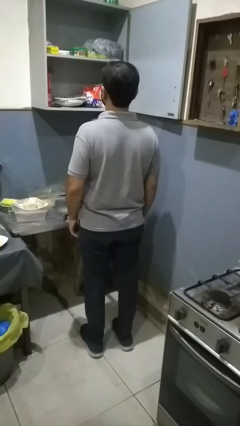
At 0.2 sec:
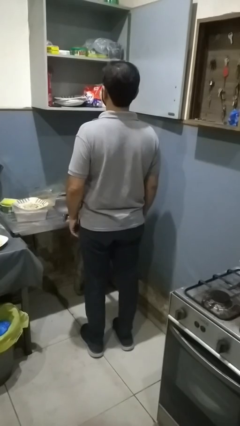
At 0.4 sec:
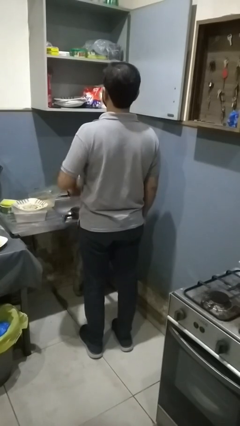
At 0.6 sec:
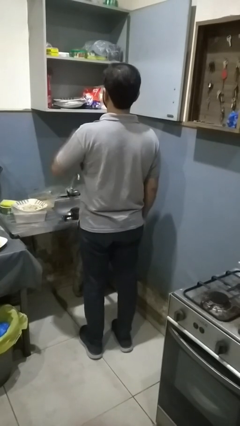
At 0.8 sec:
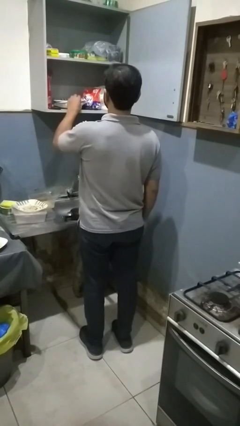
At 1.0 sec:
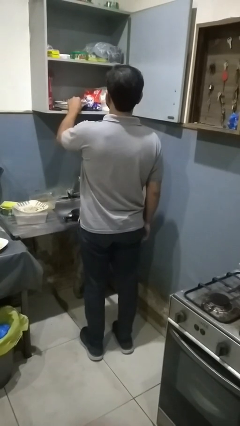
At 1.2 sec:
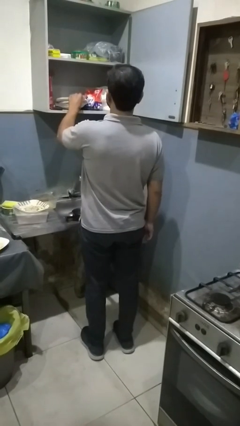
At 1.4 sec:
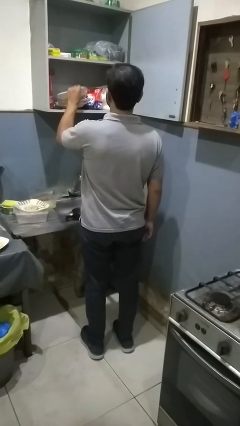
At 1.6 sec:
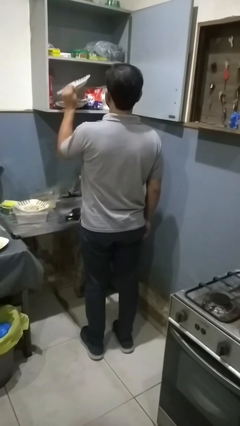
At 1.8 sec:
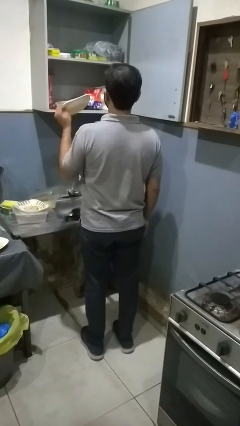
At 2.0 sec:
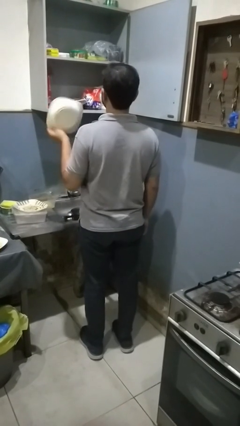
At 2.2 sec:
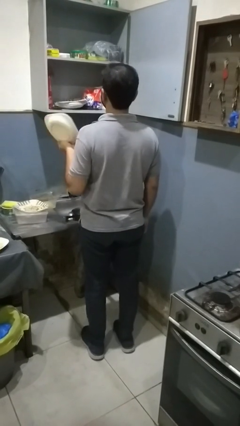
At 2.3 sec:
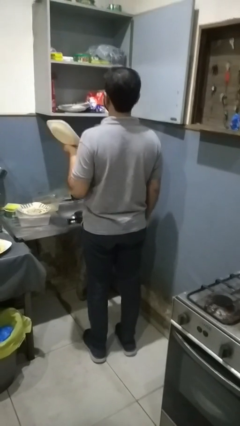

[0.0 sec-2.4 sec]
person takes object from cabinet

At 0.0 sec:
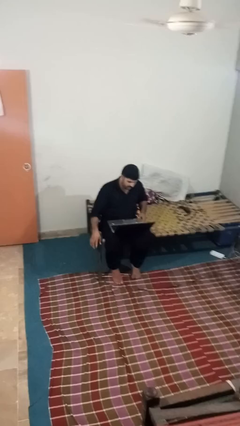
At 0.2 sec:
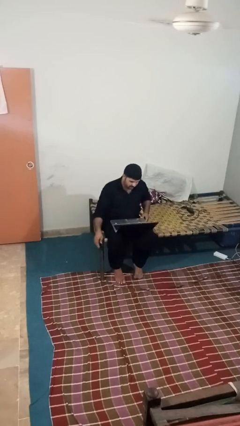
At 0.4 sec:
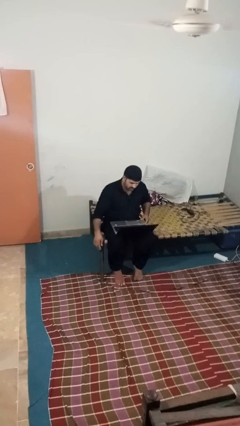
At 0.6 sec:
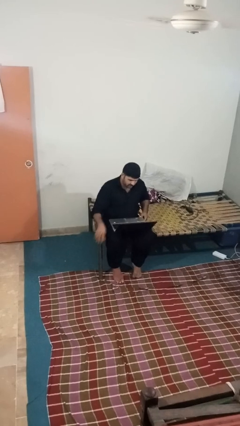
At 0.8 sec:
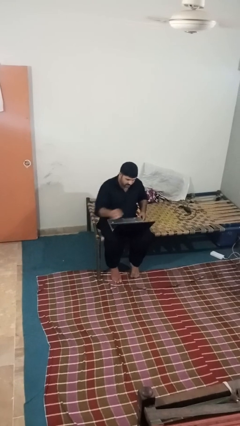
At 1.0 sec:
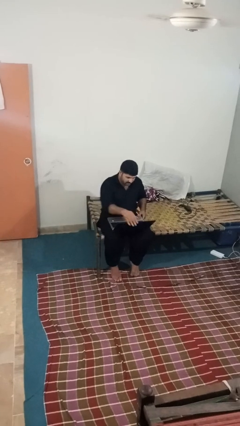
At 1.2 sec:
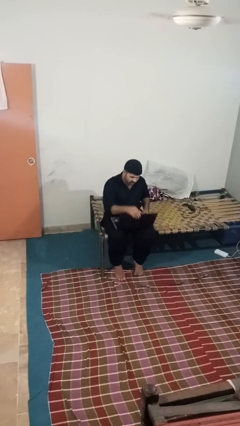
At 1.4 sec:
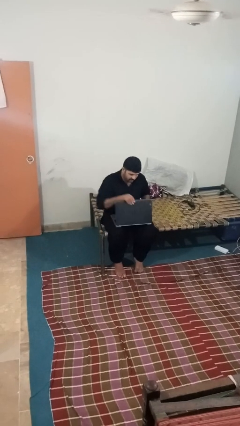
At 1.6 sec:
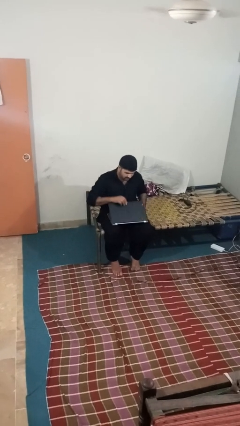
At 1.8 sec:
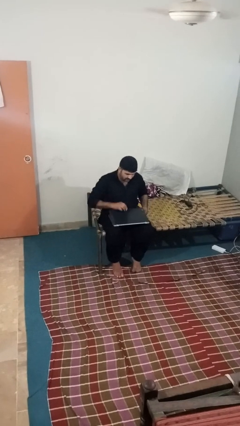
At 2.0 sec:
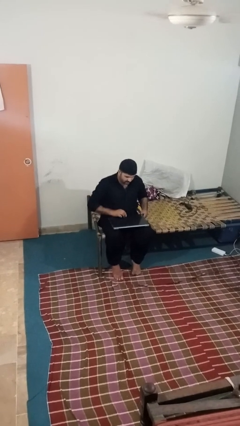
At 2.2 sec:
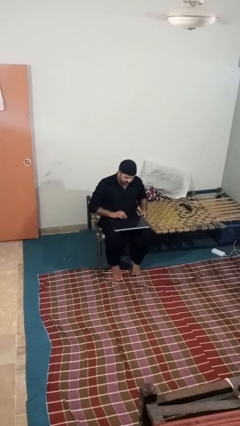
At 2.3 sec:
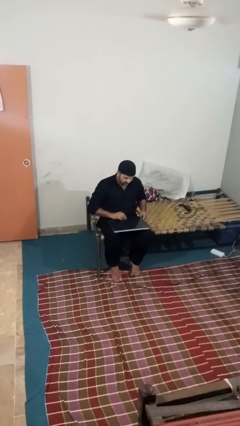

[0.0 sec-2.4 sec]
person closes laptop

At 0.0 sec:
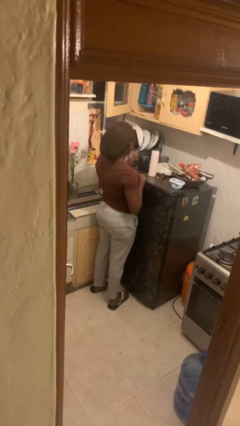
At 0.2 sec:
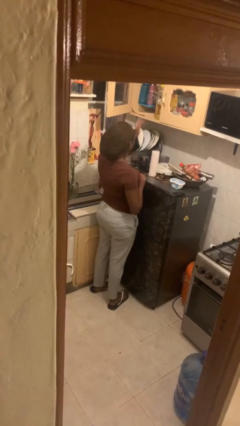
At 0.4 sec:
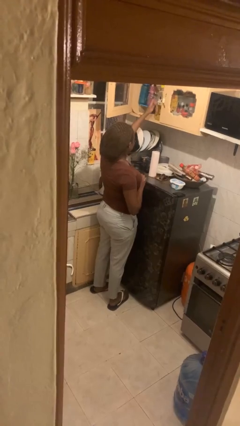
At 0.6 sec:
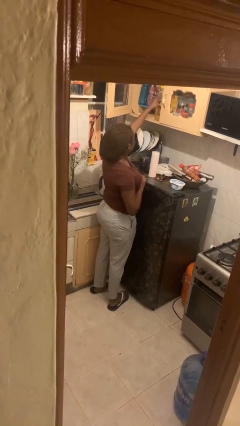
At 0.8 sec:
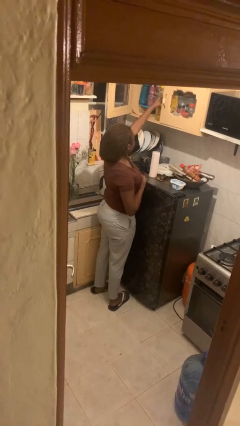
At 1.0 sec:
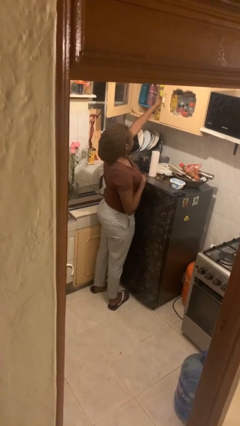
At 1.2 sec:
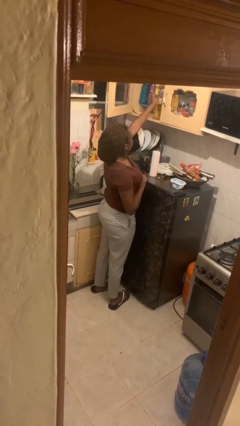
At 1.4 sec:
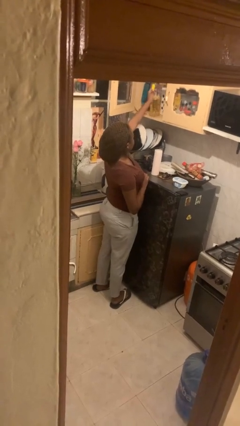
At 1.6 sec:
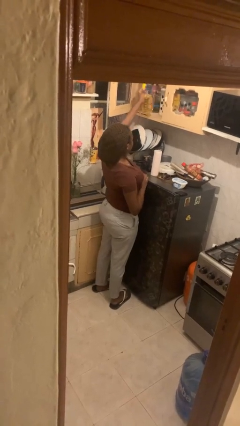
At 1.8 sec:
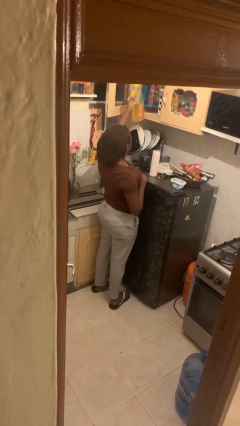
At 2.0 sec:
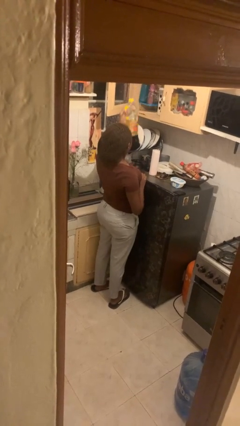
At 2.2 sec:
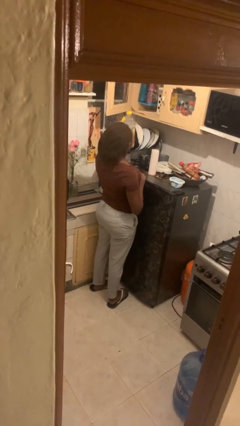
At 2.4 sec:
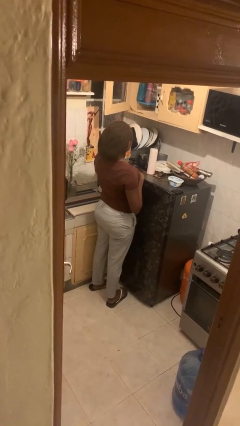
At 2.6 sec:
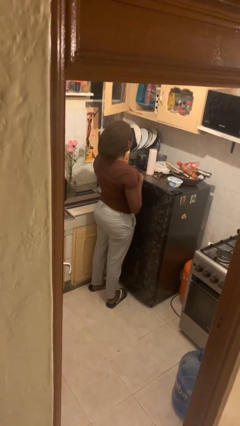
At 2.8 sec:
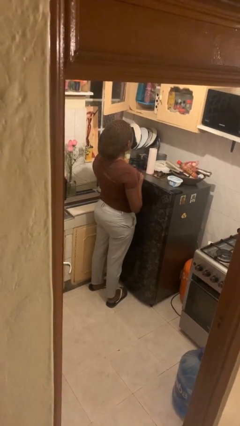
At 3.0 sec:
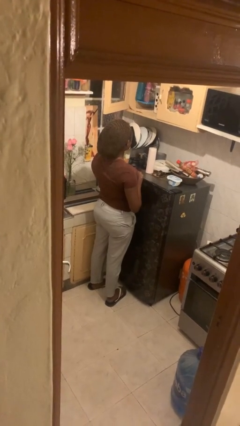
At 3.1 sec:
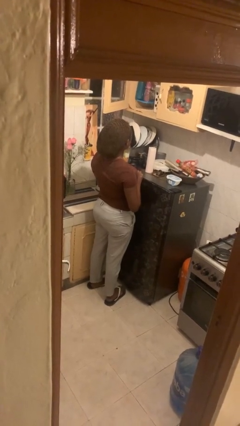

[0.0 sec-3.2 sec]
person picks up object from cabinet

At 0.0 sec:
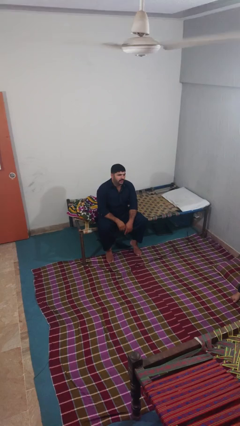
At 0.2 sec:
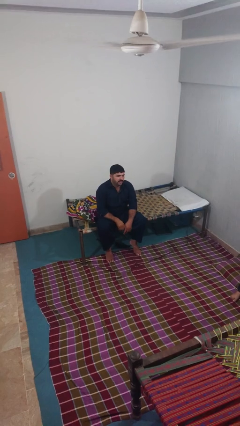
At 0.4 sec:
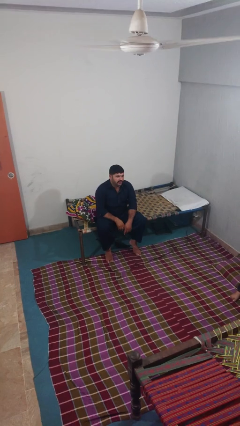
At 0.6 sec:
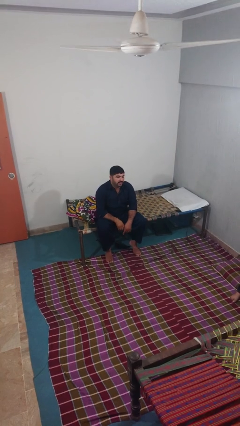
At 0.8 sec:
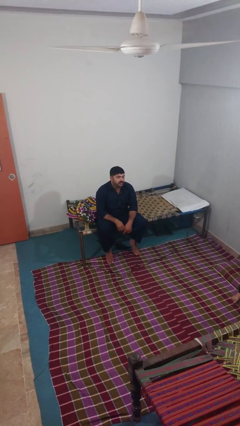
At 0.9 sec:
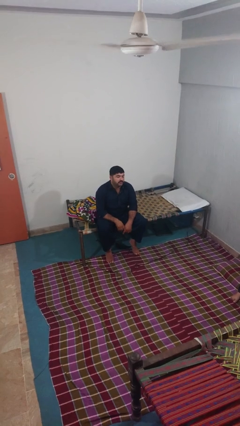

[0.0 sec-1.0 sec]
person gestures lower hand

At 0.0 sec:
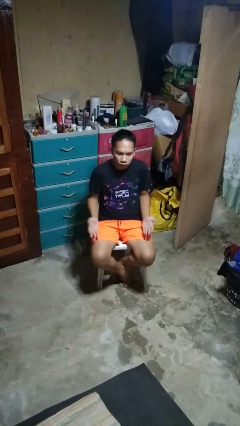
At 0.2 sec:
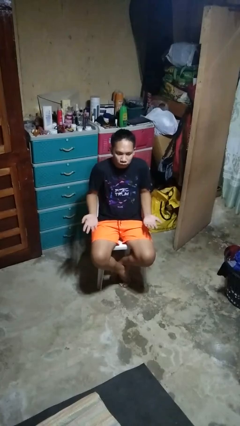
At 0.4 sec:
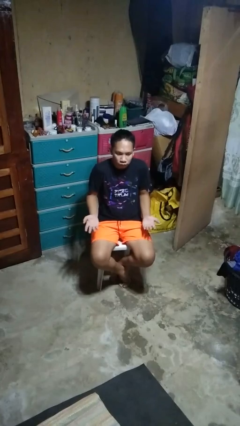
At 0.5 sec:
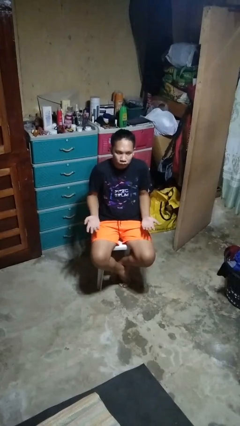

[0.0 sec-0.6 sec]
person shrugs

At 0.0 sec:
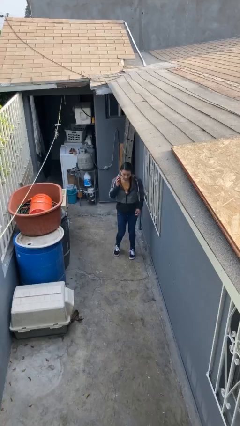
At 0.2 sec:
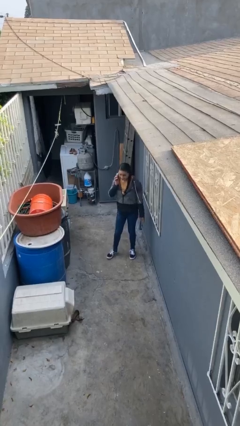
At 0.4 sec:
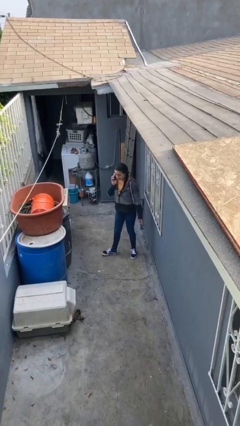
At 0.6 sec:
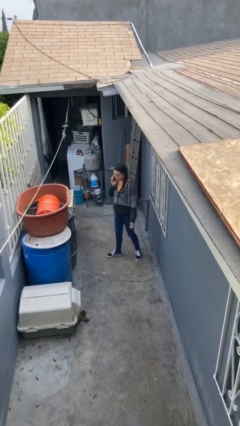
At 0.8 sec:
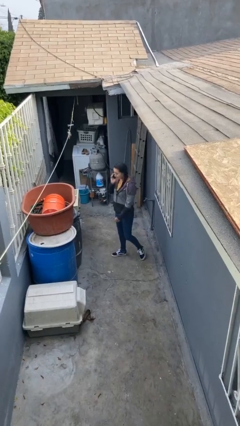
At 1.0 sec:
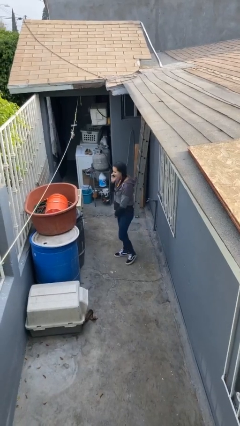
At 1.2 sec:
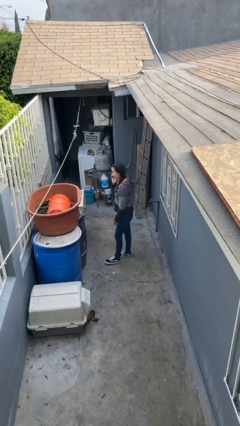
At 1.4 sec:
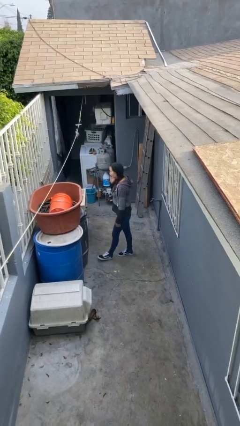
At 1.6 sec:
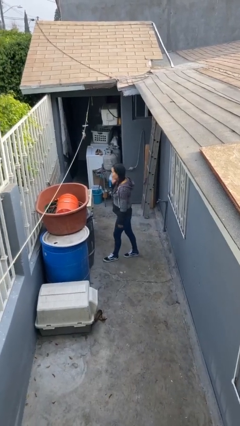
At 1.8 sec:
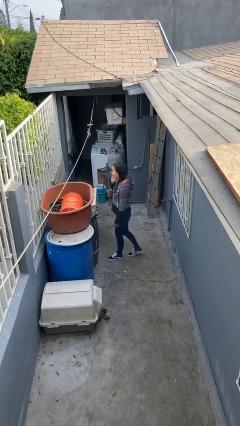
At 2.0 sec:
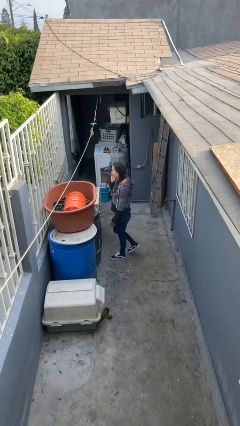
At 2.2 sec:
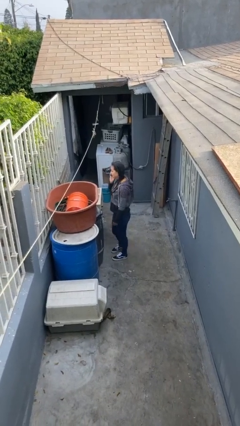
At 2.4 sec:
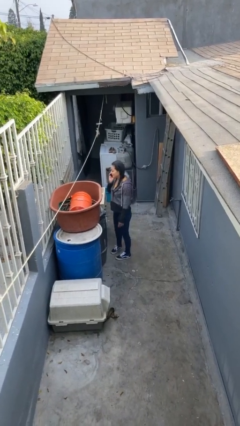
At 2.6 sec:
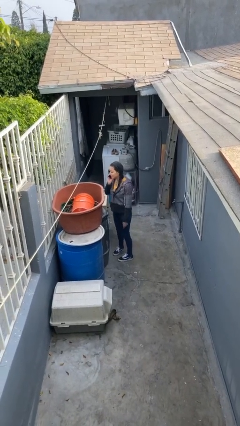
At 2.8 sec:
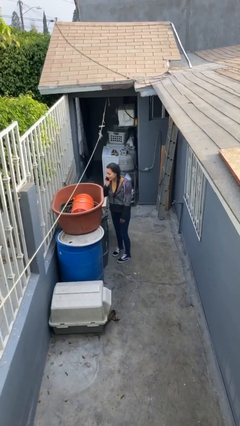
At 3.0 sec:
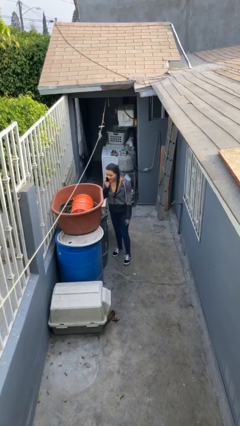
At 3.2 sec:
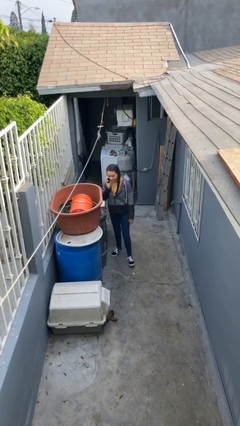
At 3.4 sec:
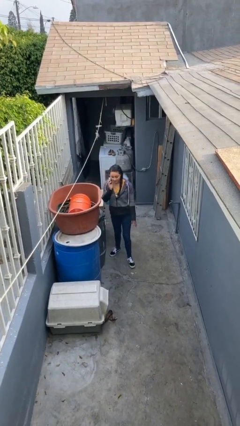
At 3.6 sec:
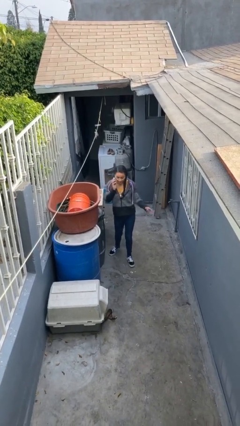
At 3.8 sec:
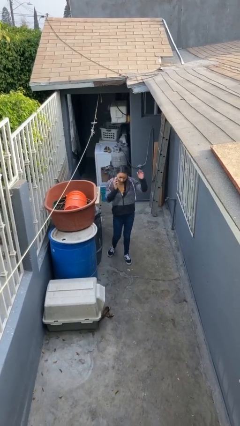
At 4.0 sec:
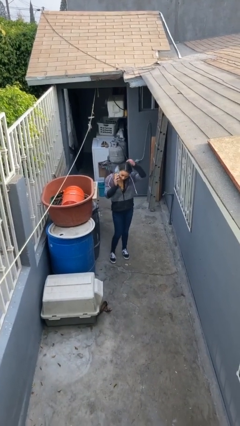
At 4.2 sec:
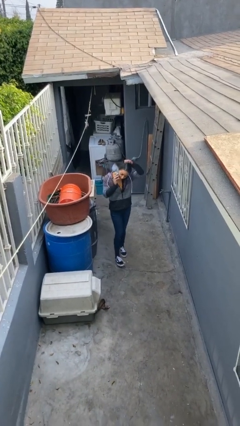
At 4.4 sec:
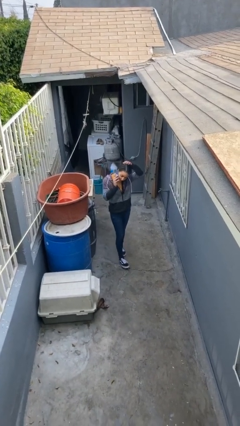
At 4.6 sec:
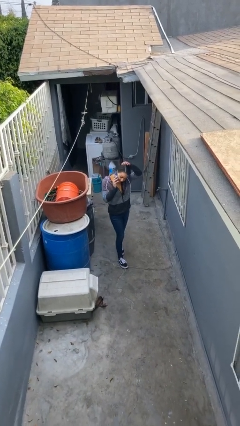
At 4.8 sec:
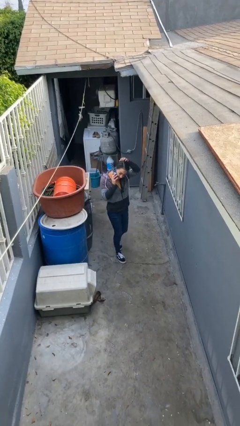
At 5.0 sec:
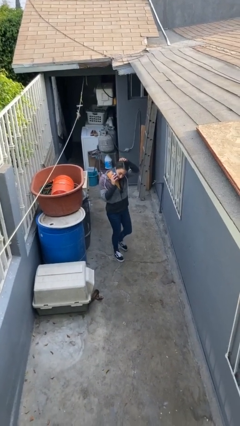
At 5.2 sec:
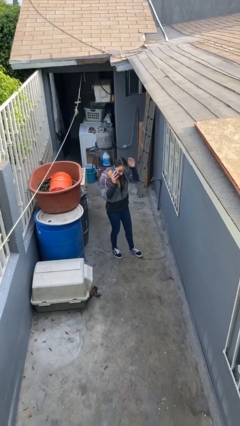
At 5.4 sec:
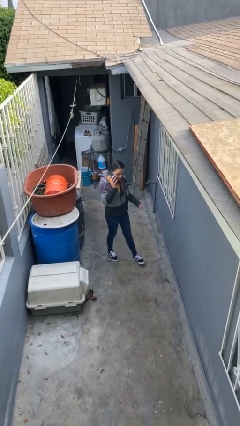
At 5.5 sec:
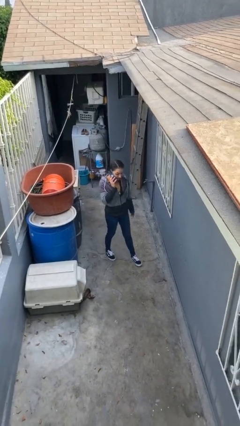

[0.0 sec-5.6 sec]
person talks on phone

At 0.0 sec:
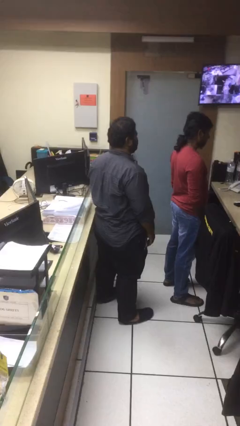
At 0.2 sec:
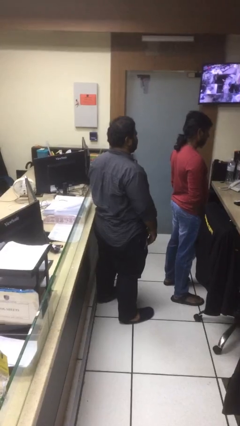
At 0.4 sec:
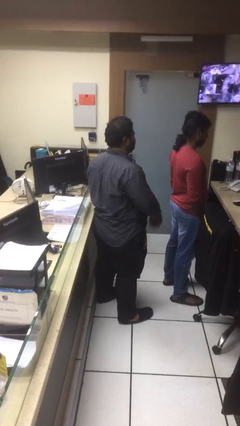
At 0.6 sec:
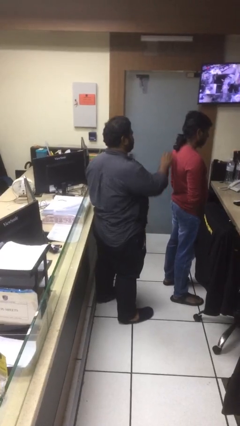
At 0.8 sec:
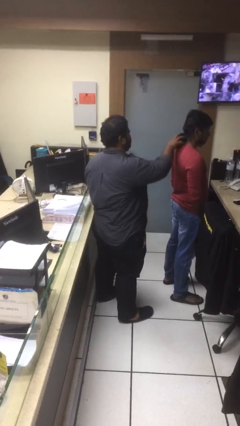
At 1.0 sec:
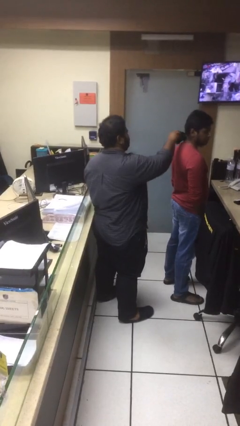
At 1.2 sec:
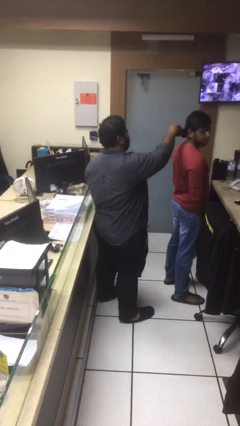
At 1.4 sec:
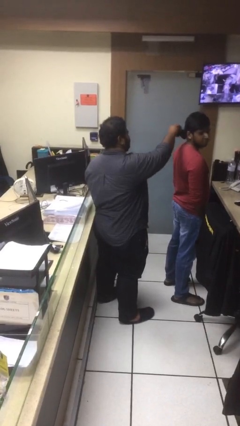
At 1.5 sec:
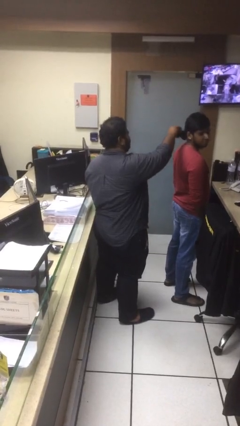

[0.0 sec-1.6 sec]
person grabs person by hair
